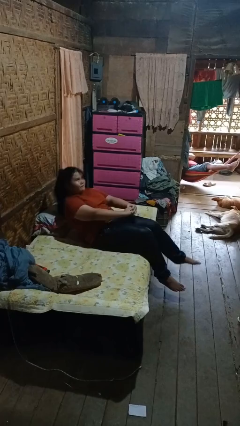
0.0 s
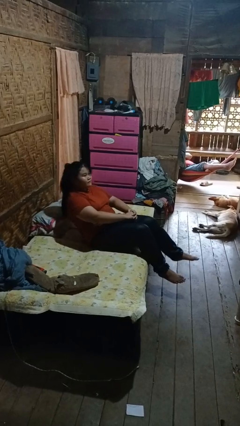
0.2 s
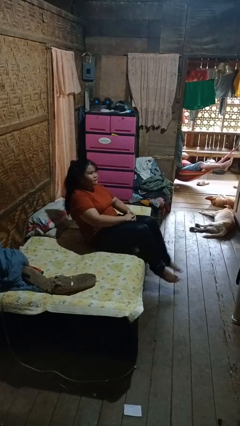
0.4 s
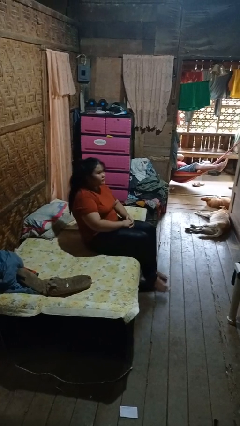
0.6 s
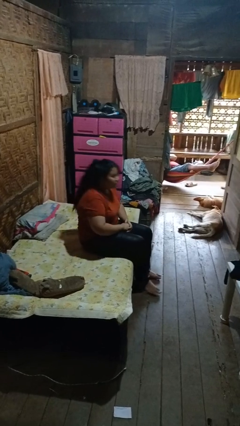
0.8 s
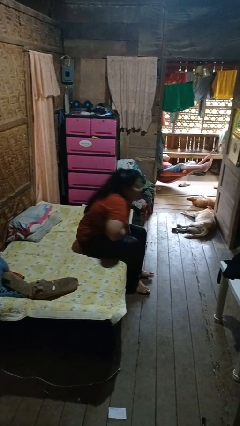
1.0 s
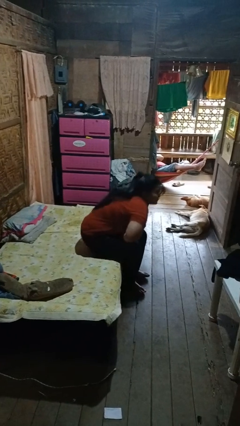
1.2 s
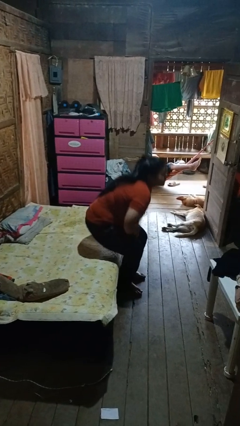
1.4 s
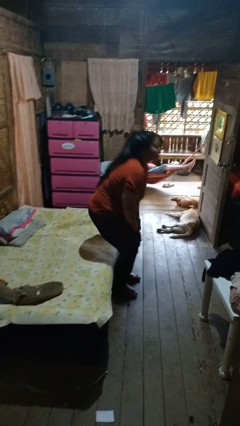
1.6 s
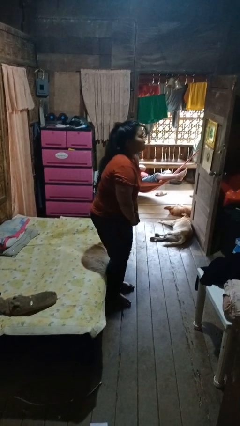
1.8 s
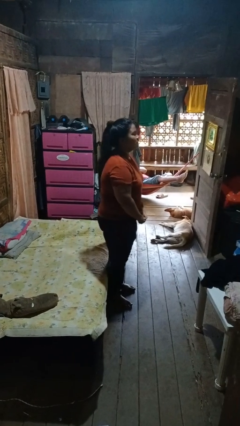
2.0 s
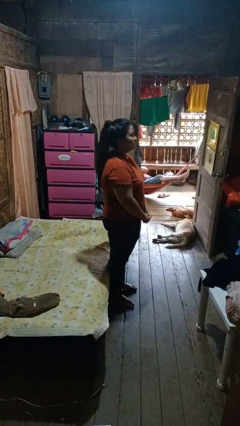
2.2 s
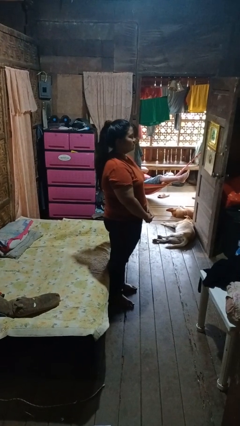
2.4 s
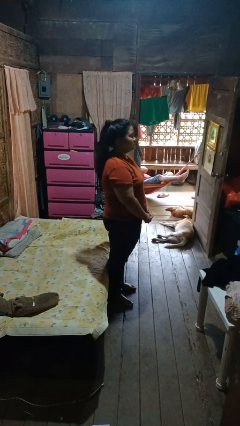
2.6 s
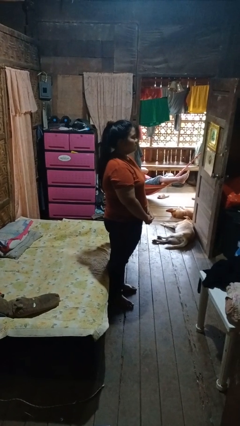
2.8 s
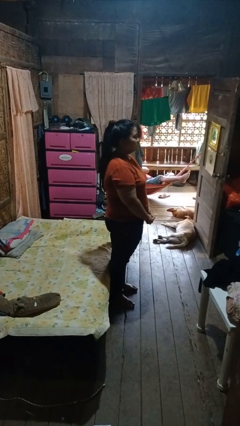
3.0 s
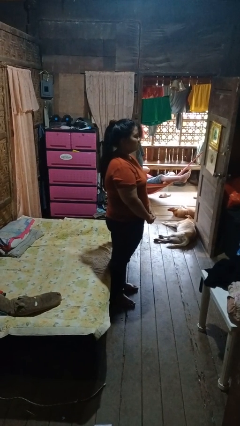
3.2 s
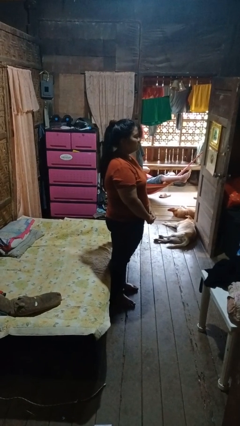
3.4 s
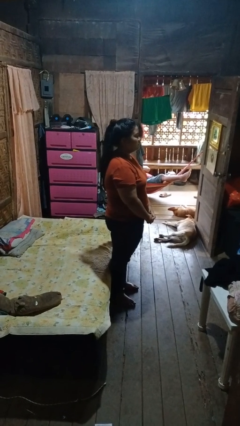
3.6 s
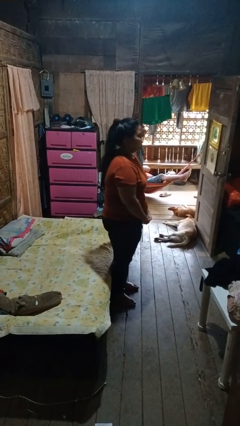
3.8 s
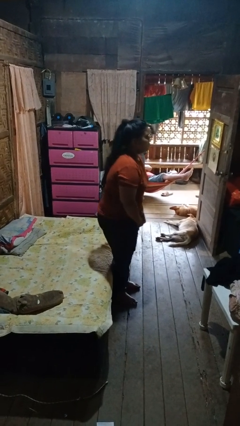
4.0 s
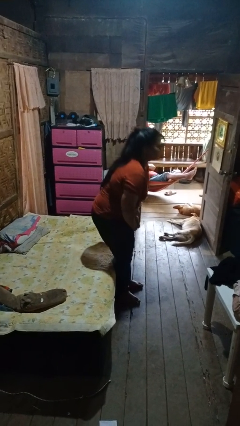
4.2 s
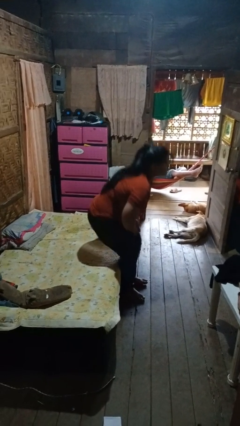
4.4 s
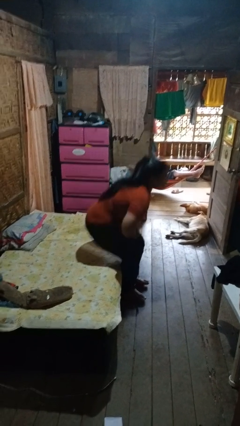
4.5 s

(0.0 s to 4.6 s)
person stands up

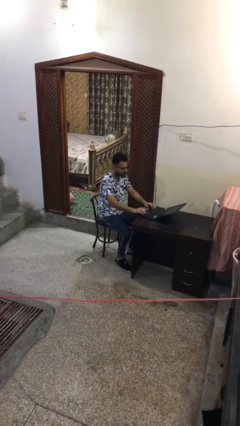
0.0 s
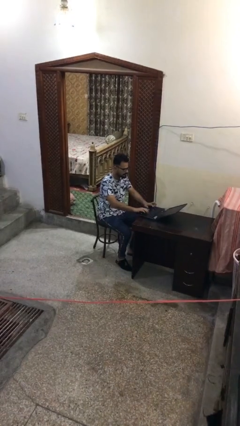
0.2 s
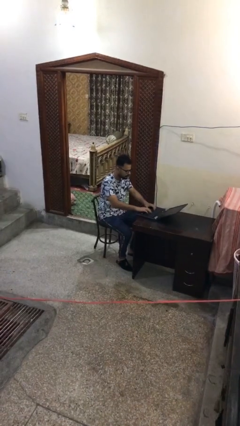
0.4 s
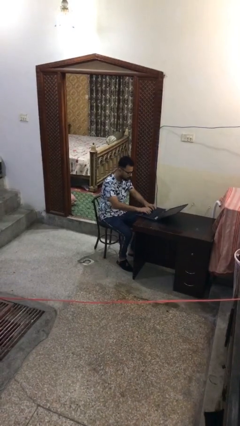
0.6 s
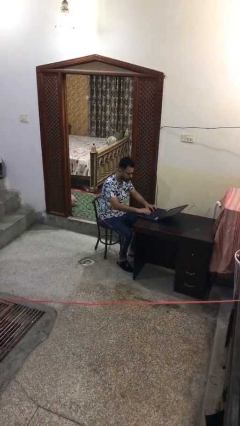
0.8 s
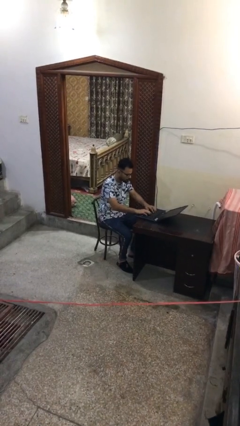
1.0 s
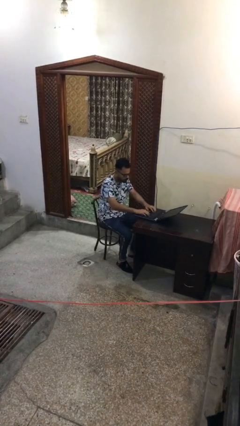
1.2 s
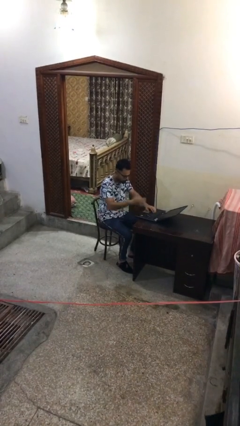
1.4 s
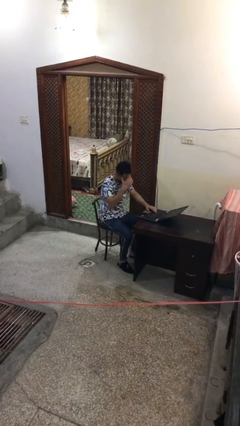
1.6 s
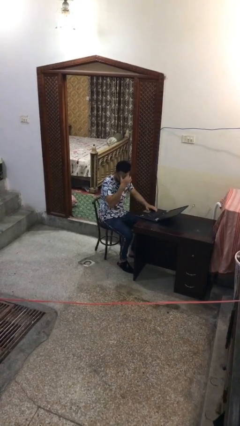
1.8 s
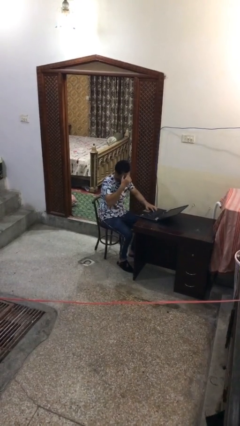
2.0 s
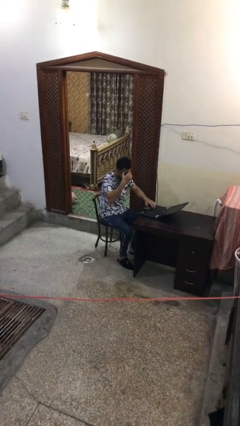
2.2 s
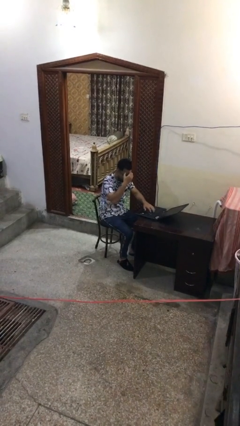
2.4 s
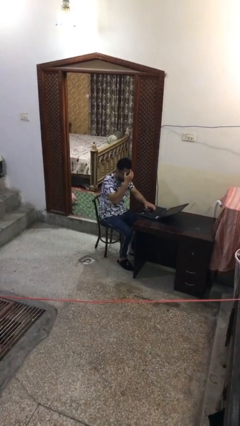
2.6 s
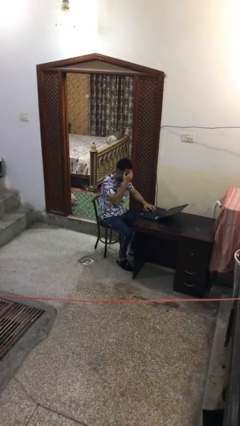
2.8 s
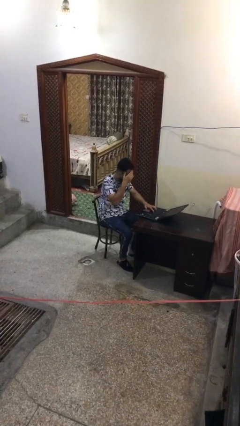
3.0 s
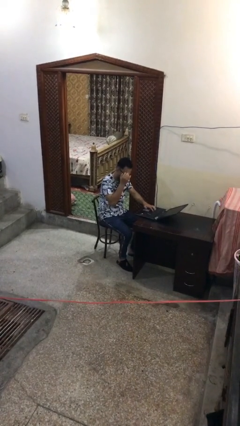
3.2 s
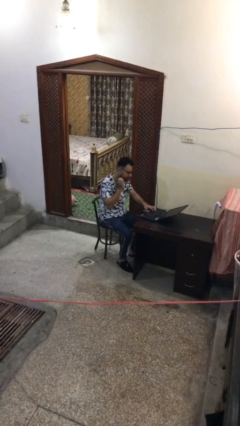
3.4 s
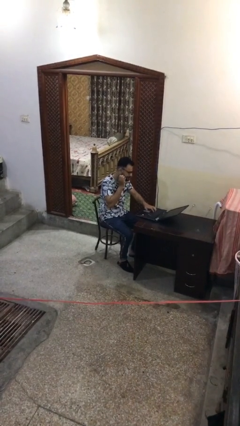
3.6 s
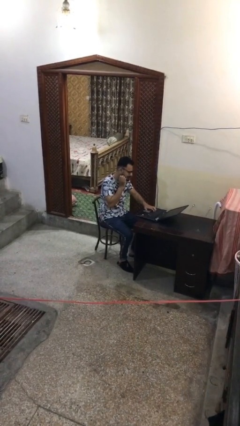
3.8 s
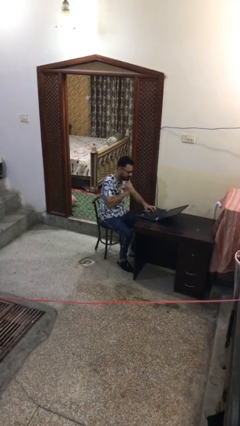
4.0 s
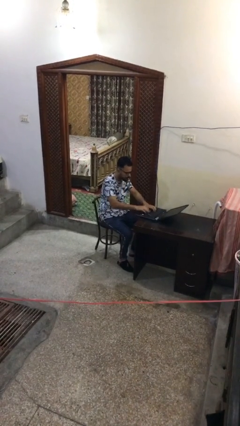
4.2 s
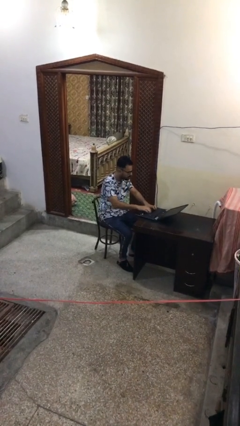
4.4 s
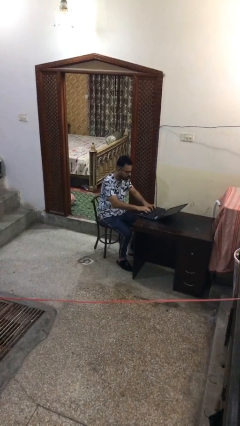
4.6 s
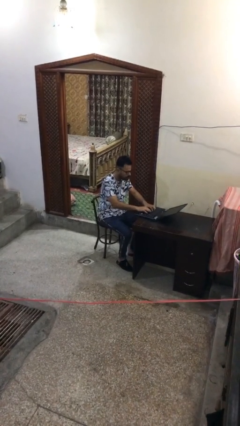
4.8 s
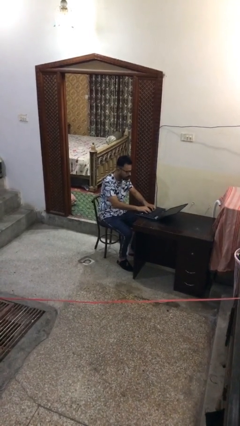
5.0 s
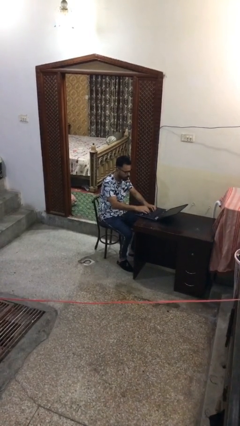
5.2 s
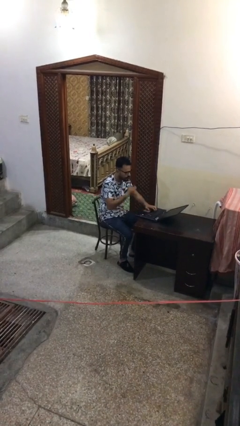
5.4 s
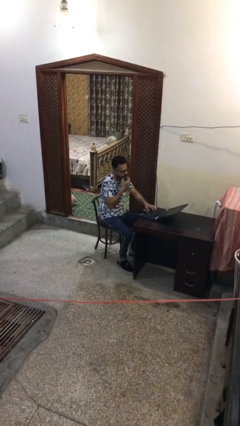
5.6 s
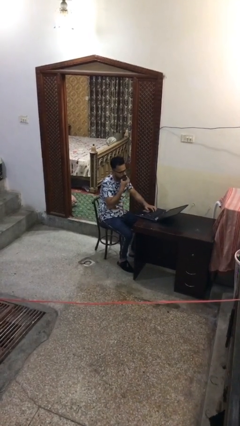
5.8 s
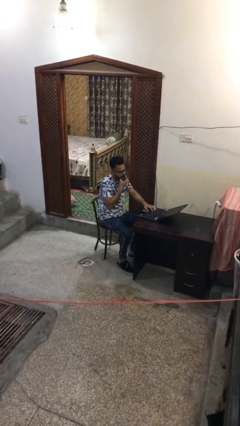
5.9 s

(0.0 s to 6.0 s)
person interacts with laptop

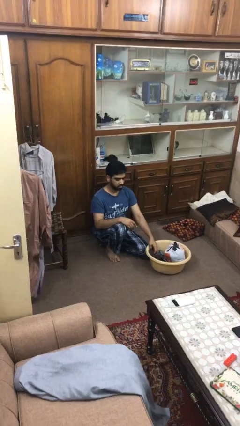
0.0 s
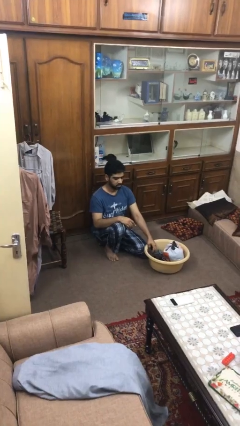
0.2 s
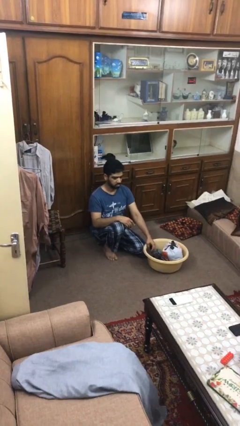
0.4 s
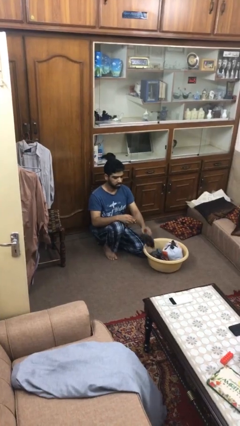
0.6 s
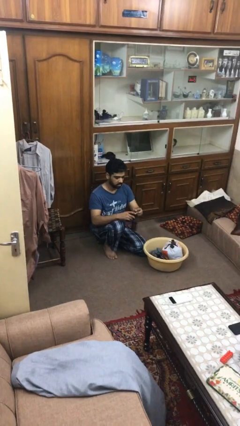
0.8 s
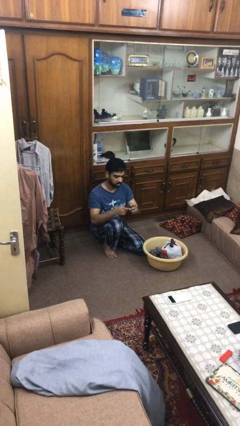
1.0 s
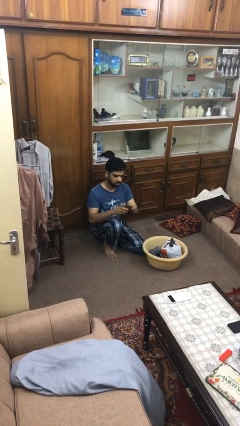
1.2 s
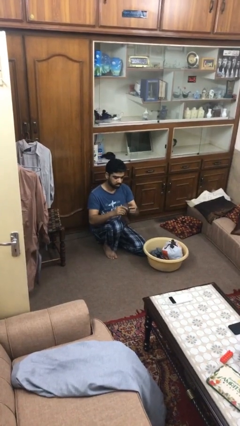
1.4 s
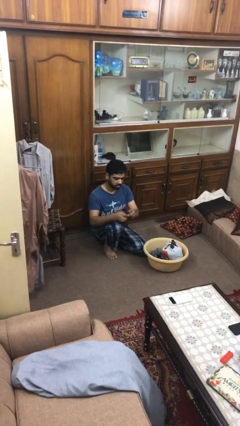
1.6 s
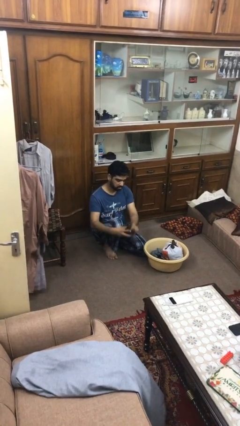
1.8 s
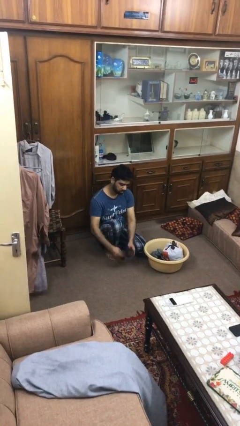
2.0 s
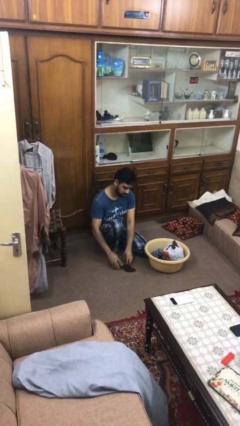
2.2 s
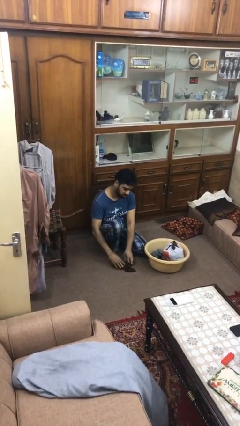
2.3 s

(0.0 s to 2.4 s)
person folds socks

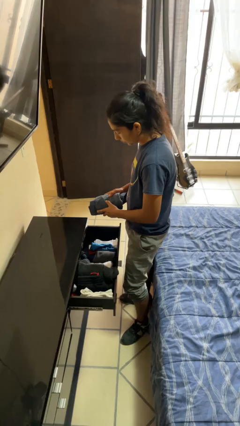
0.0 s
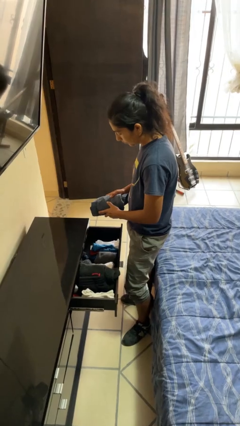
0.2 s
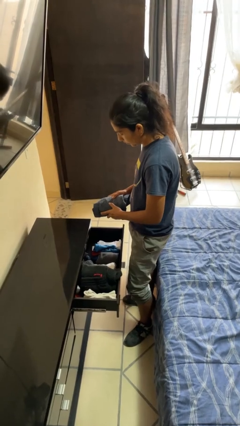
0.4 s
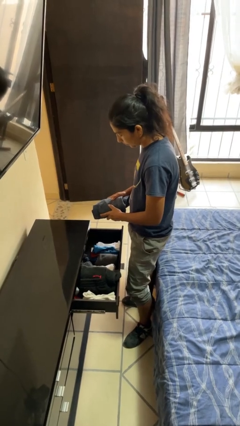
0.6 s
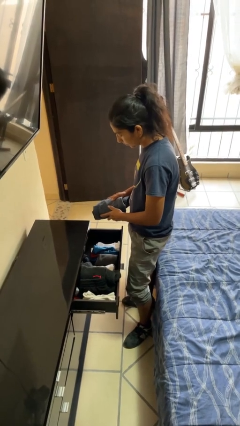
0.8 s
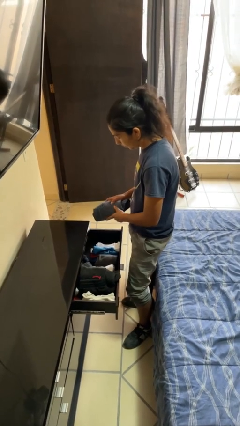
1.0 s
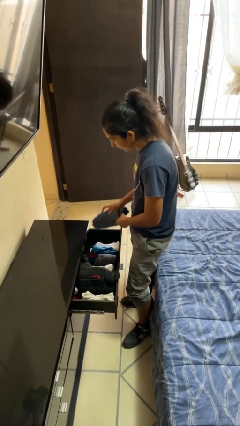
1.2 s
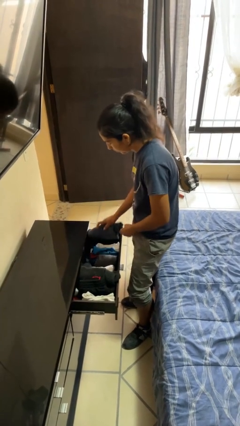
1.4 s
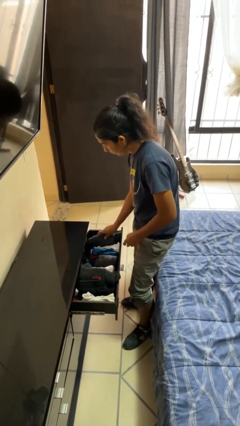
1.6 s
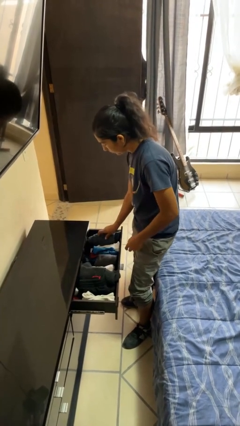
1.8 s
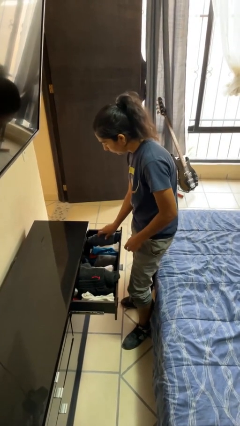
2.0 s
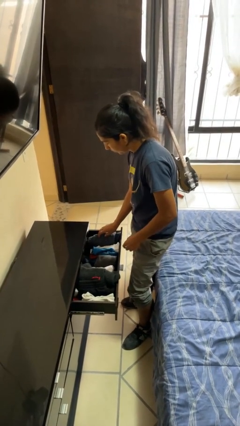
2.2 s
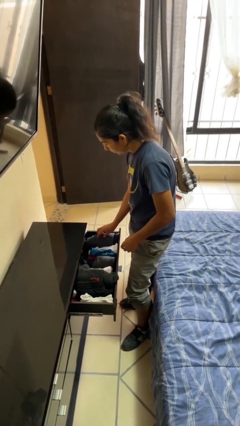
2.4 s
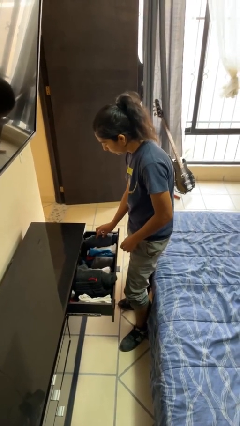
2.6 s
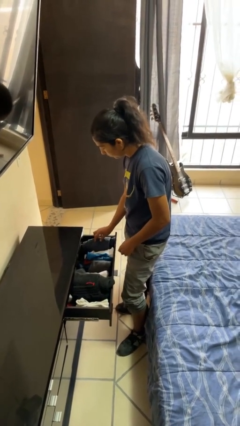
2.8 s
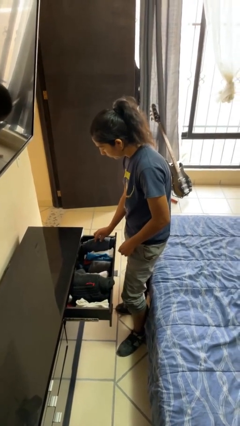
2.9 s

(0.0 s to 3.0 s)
person puts clothes into dresser

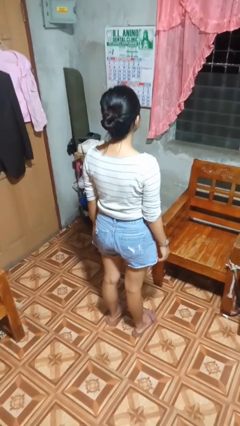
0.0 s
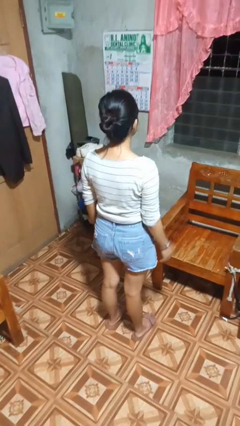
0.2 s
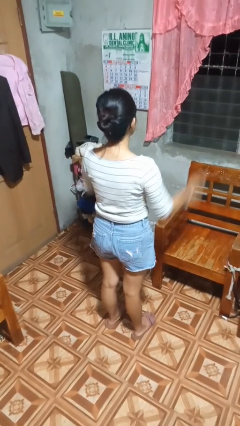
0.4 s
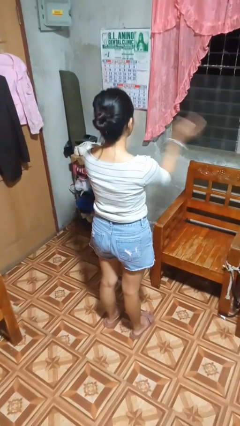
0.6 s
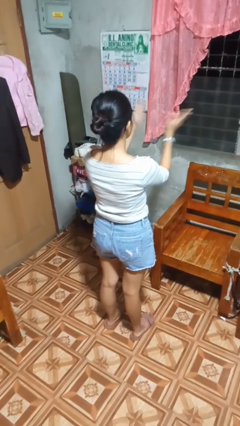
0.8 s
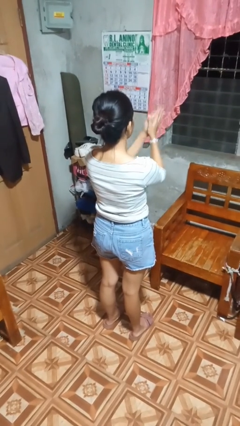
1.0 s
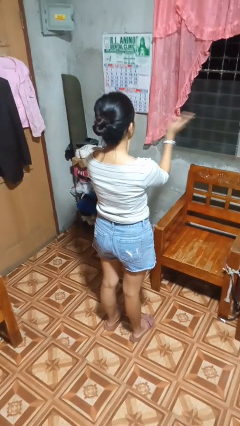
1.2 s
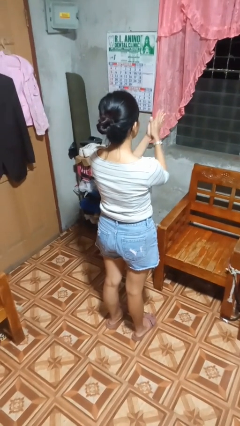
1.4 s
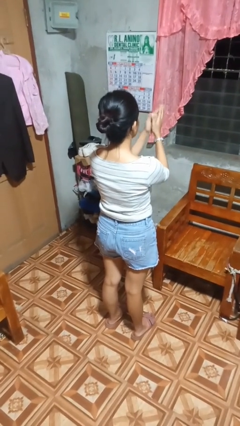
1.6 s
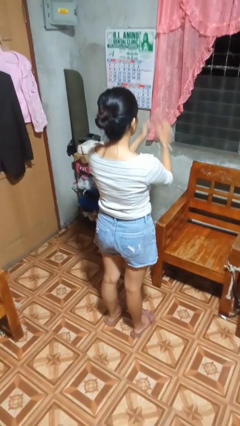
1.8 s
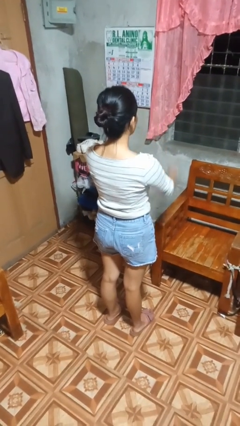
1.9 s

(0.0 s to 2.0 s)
person claps hands
